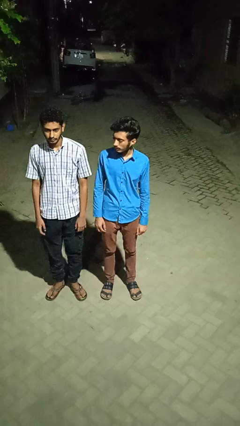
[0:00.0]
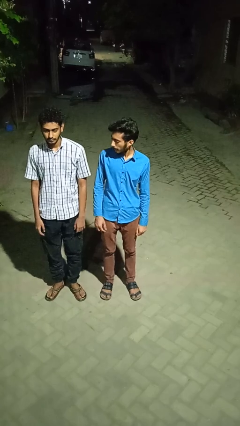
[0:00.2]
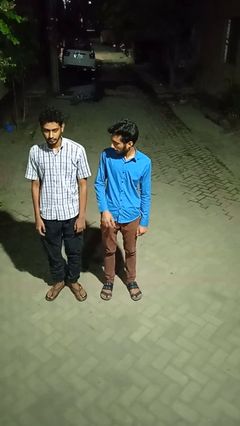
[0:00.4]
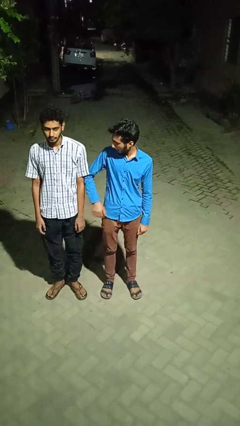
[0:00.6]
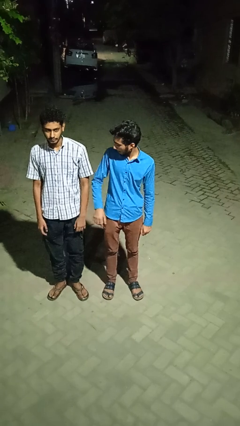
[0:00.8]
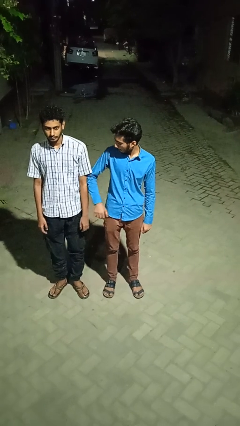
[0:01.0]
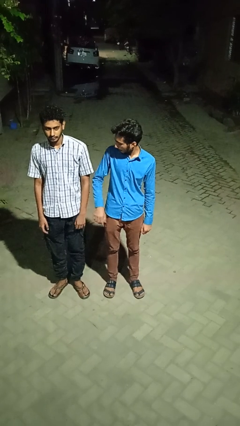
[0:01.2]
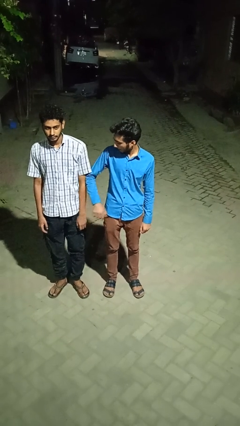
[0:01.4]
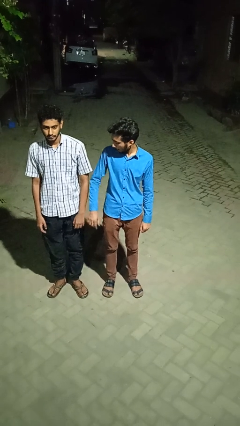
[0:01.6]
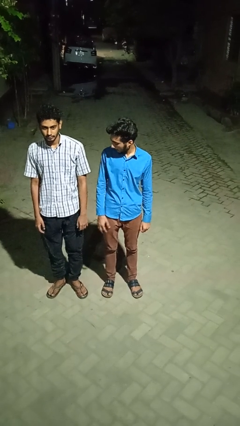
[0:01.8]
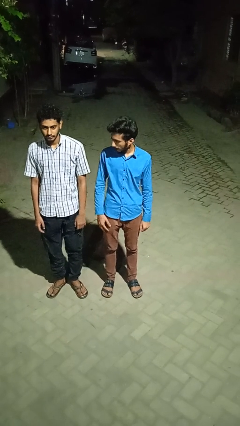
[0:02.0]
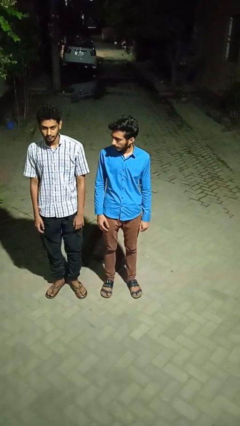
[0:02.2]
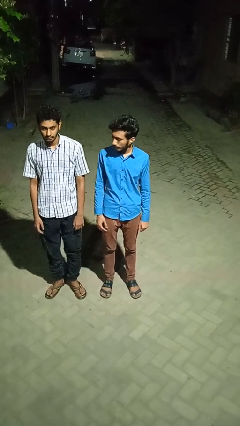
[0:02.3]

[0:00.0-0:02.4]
person nudges person with elbow

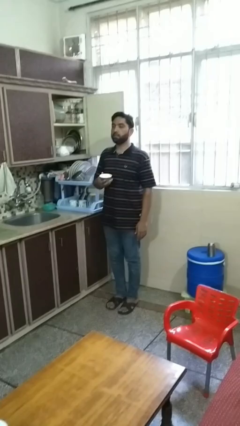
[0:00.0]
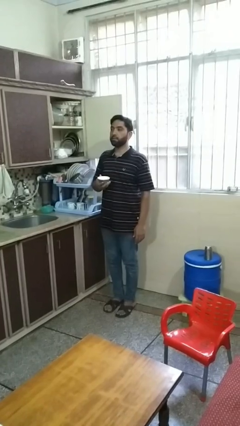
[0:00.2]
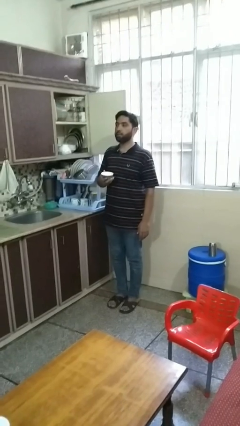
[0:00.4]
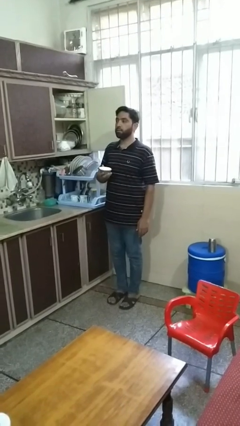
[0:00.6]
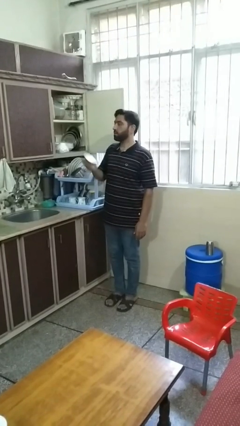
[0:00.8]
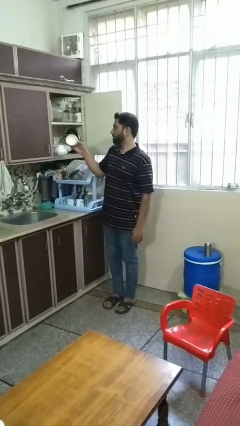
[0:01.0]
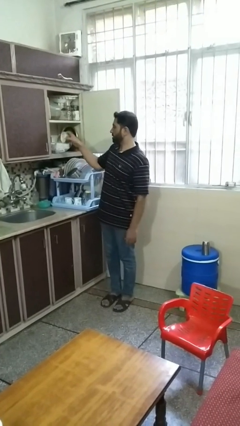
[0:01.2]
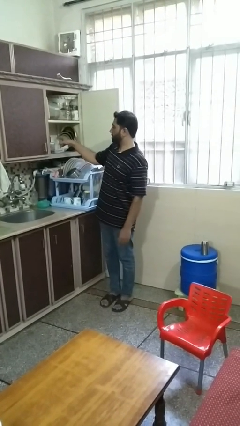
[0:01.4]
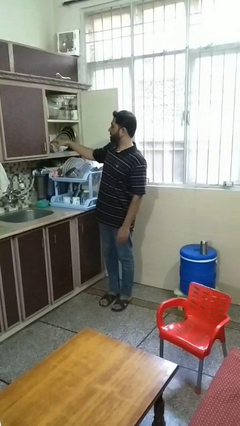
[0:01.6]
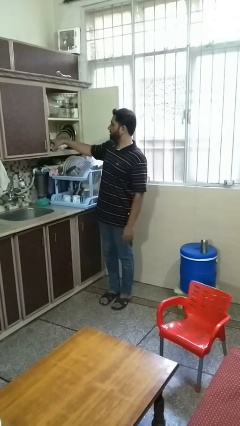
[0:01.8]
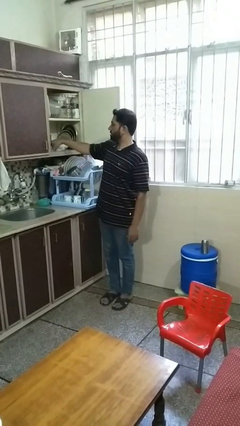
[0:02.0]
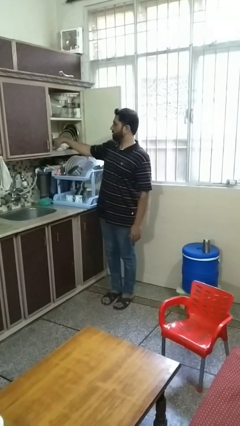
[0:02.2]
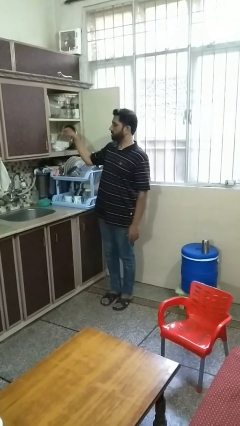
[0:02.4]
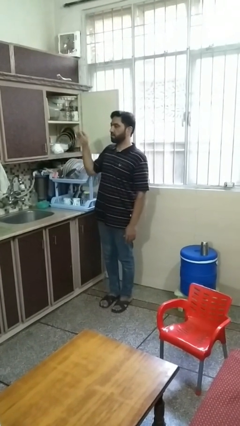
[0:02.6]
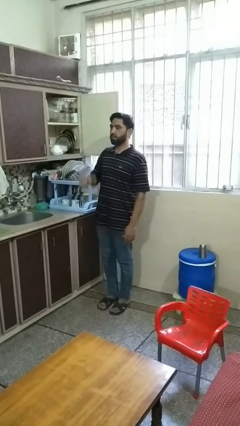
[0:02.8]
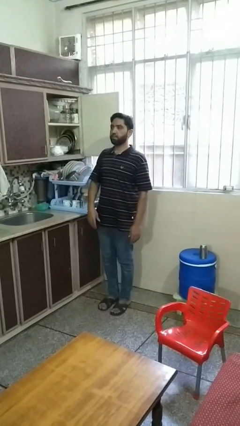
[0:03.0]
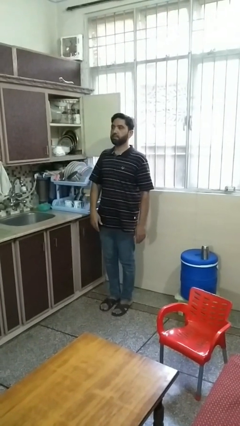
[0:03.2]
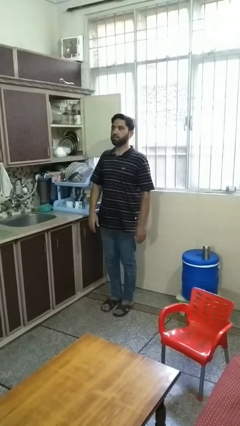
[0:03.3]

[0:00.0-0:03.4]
person puts object in cabinet

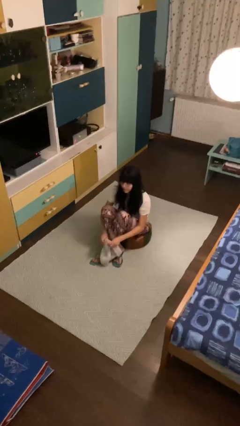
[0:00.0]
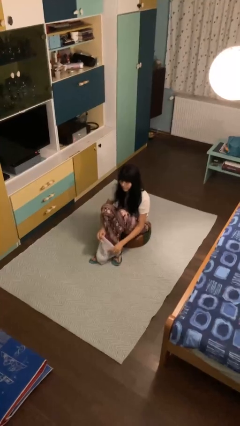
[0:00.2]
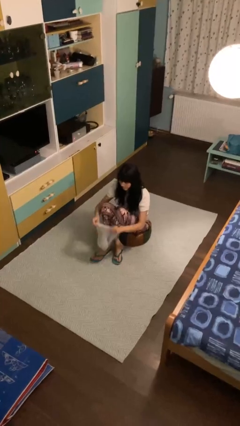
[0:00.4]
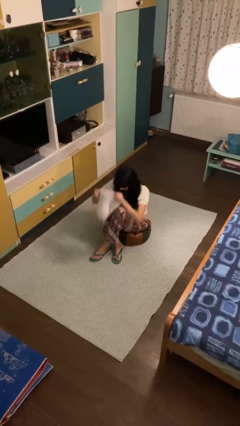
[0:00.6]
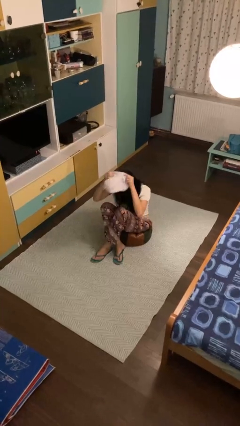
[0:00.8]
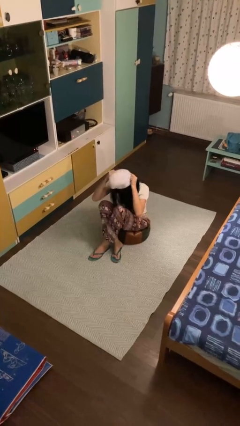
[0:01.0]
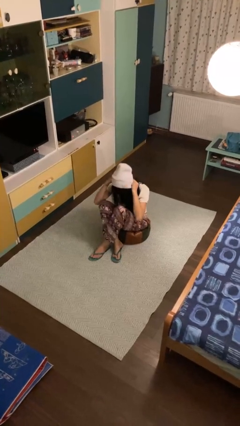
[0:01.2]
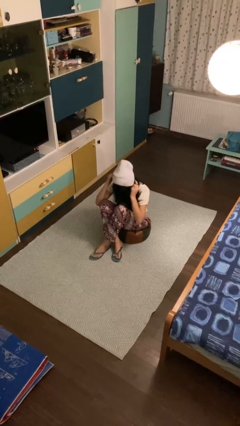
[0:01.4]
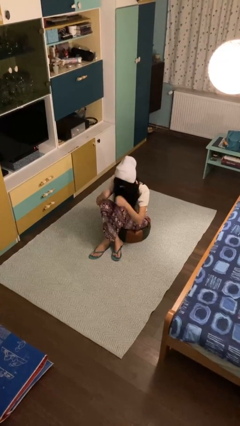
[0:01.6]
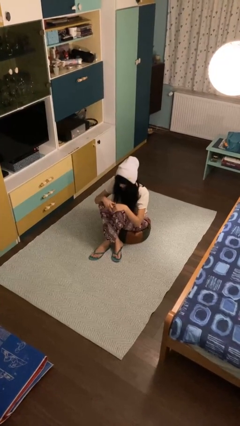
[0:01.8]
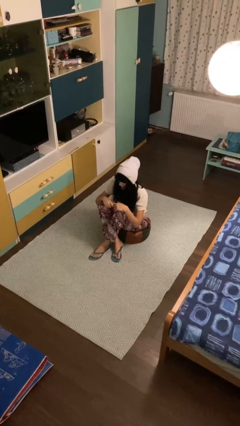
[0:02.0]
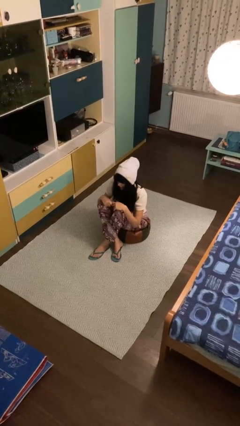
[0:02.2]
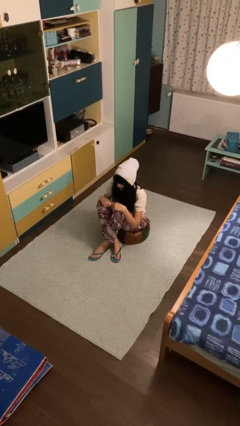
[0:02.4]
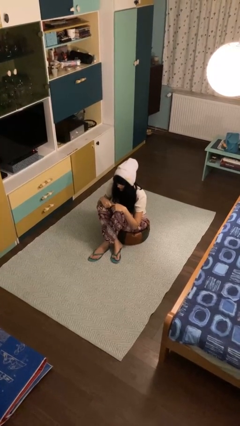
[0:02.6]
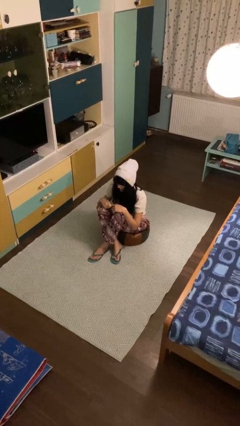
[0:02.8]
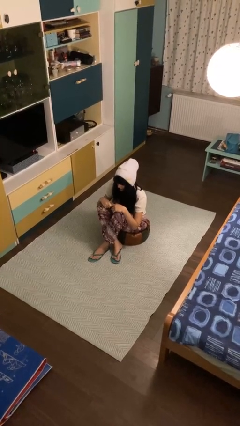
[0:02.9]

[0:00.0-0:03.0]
person puts on hat

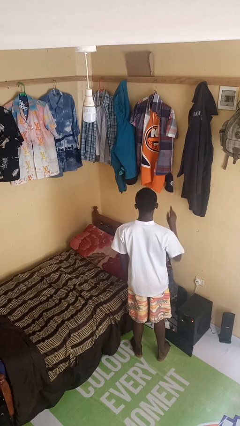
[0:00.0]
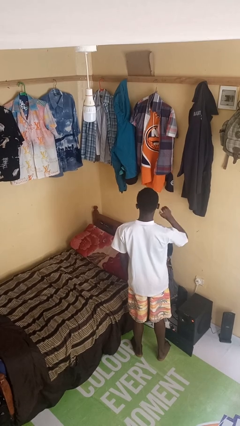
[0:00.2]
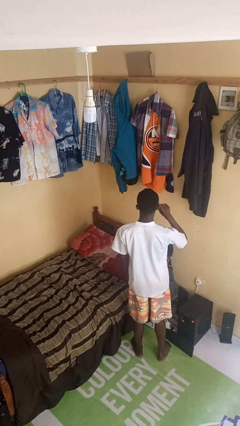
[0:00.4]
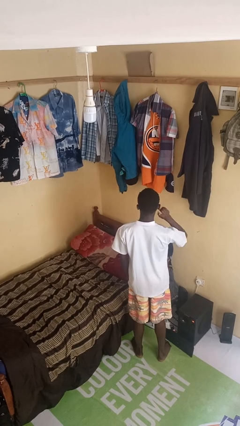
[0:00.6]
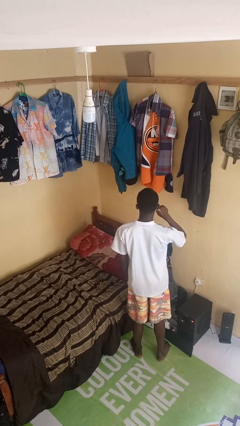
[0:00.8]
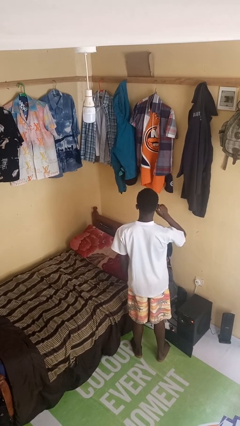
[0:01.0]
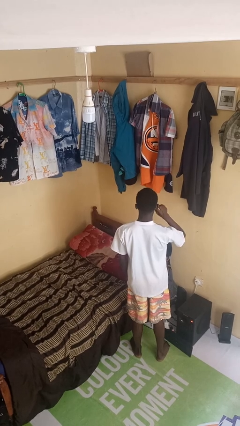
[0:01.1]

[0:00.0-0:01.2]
person gestures listen closely

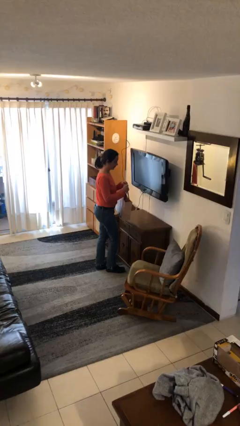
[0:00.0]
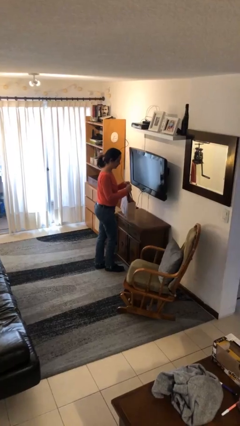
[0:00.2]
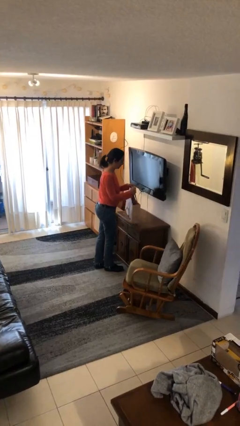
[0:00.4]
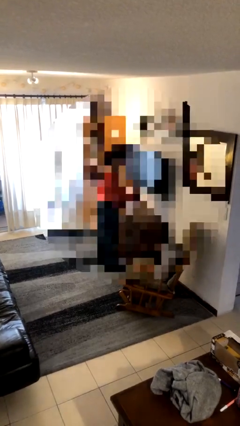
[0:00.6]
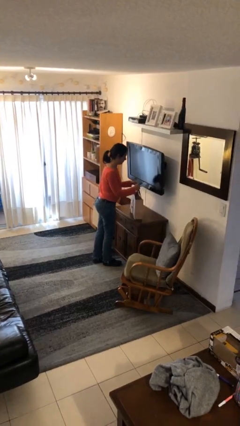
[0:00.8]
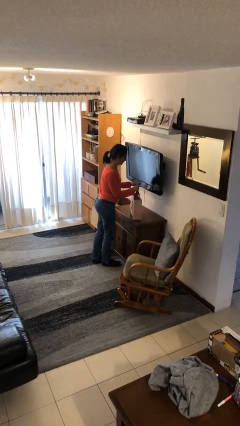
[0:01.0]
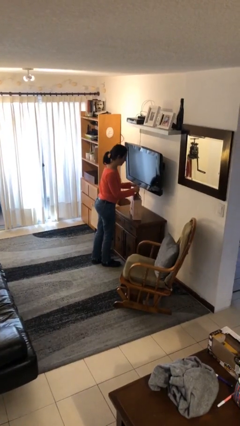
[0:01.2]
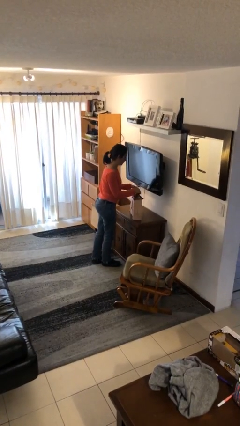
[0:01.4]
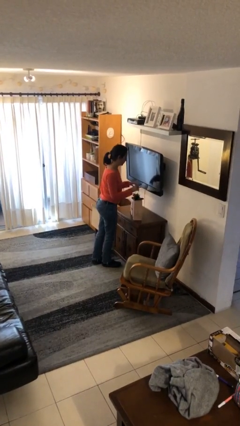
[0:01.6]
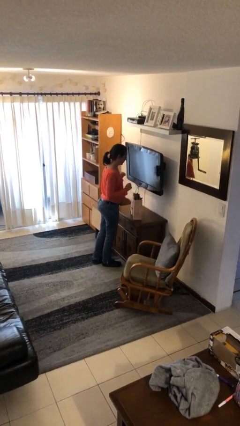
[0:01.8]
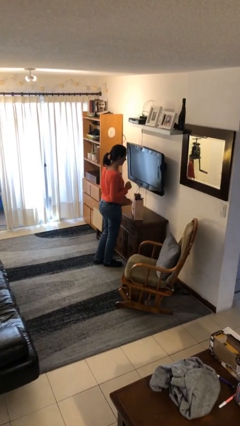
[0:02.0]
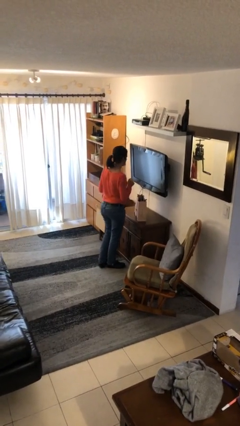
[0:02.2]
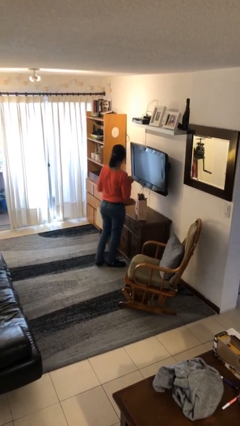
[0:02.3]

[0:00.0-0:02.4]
person puts down object on table

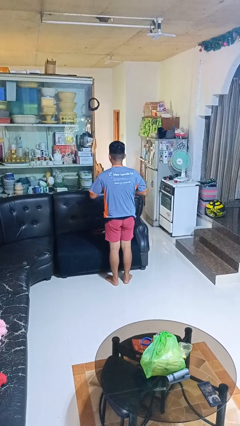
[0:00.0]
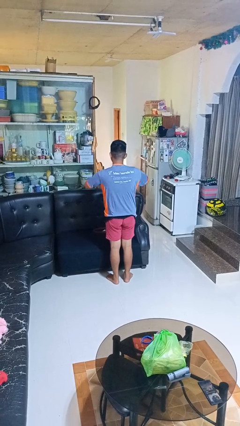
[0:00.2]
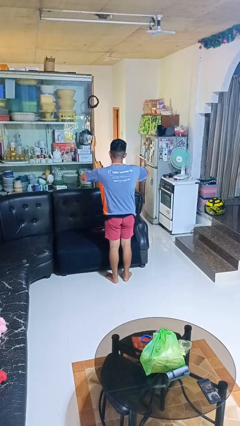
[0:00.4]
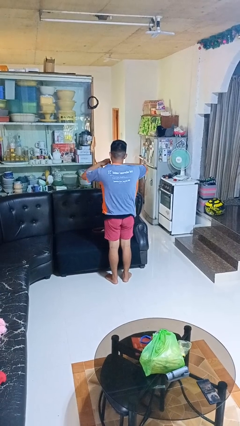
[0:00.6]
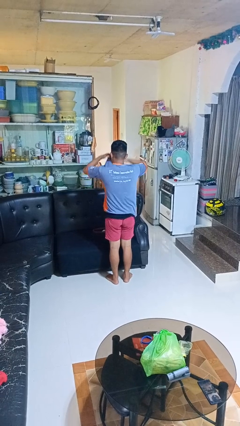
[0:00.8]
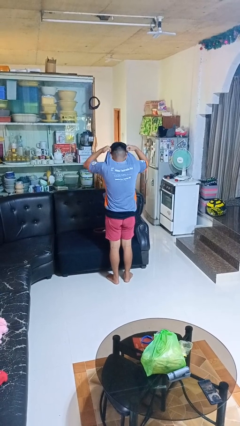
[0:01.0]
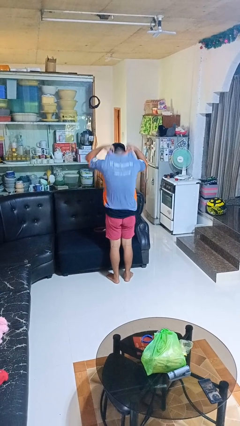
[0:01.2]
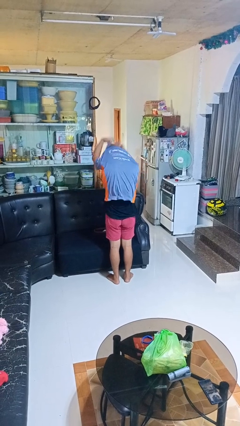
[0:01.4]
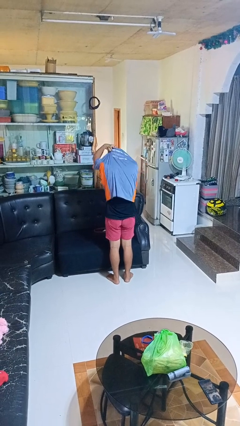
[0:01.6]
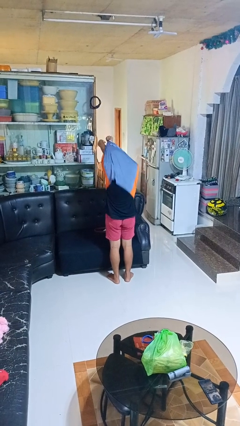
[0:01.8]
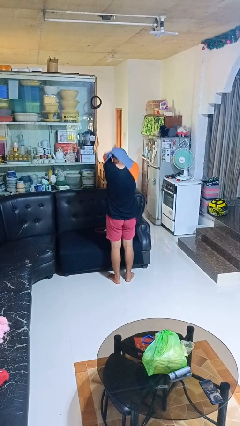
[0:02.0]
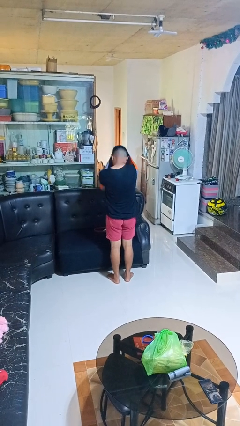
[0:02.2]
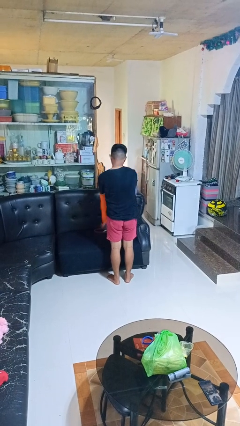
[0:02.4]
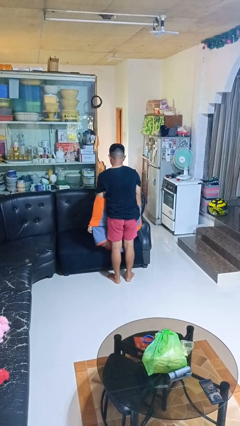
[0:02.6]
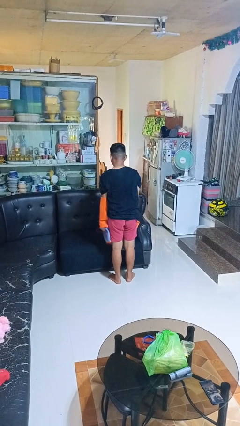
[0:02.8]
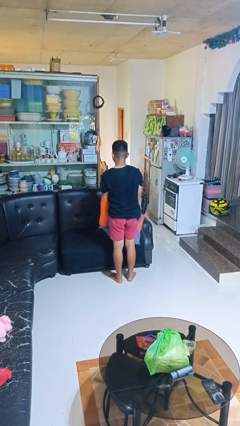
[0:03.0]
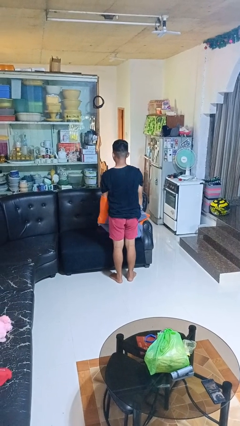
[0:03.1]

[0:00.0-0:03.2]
person takes off shirt

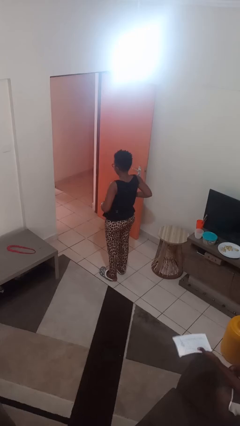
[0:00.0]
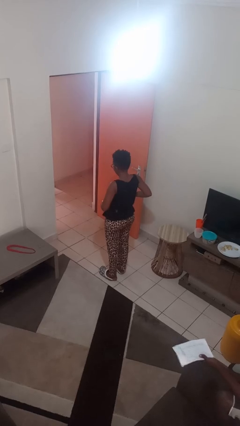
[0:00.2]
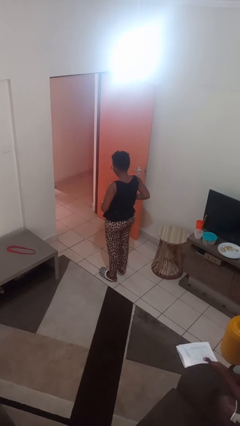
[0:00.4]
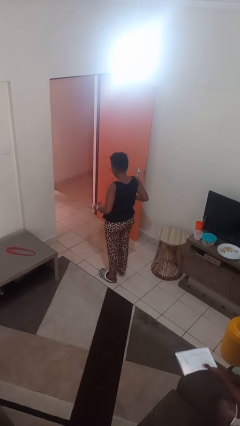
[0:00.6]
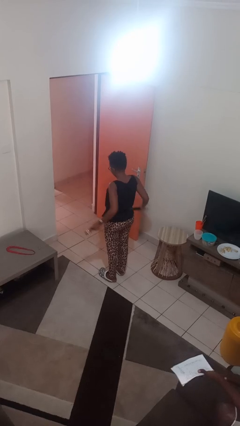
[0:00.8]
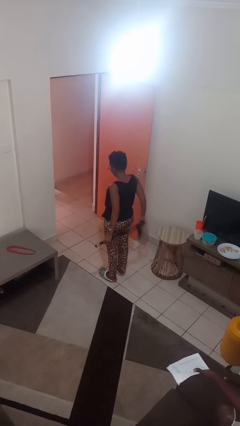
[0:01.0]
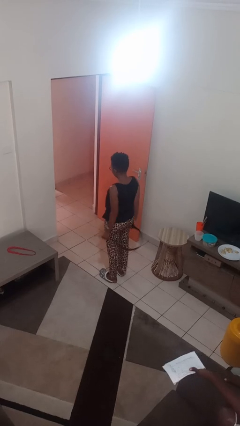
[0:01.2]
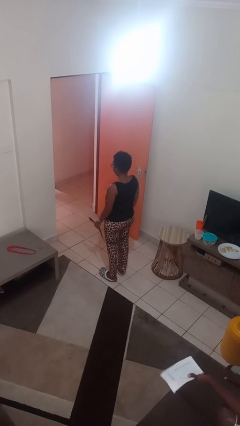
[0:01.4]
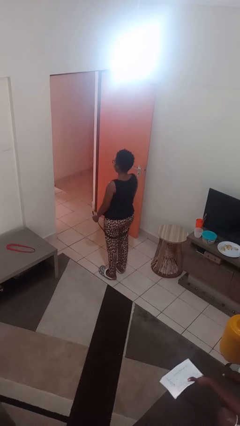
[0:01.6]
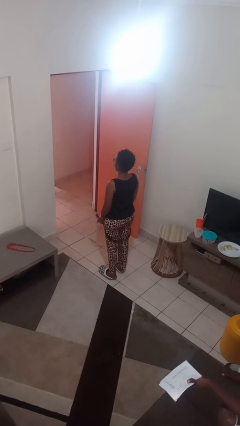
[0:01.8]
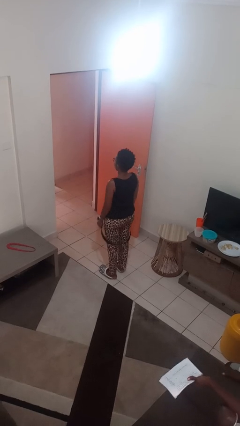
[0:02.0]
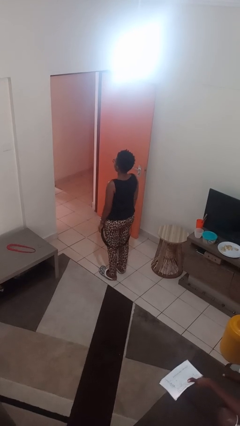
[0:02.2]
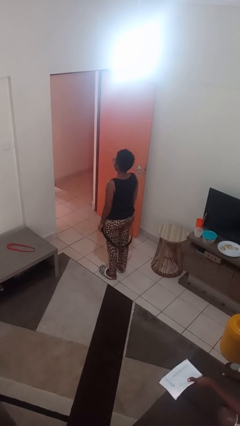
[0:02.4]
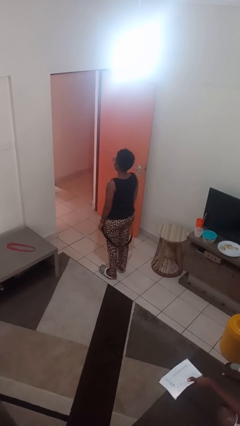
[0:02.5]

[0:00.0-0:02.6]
person takes off belt
